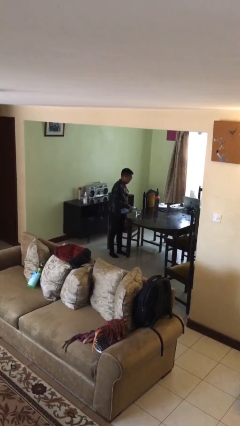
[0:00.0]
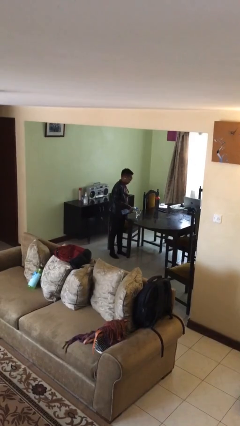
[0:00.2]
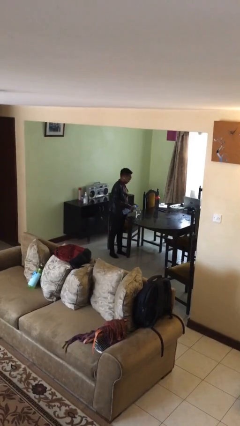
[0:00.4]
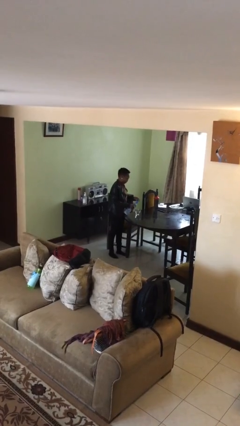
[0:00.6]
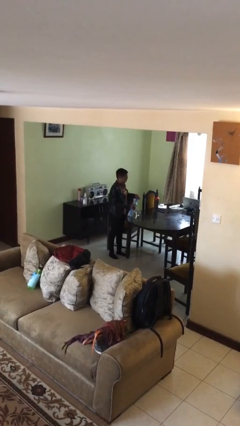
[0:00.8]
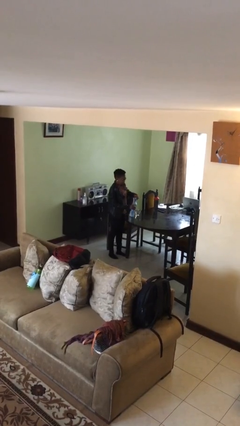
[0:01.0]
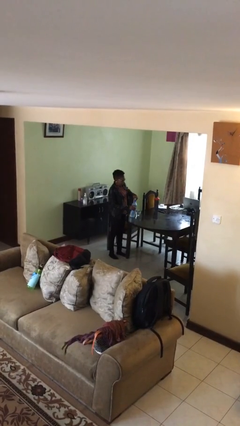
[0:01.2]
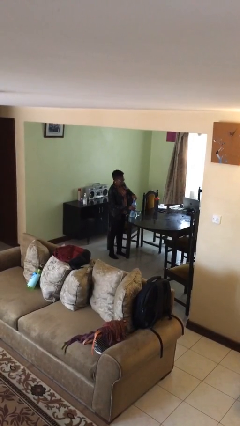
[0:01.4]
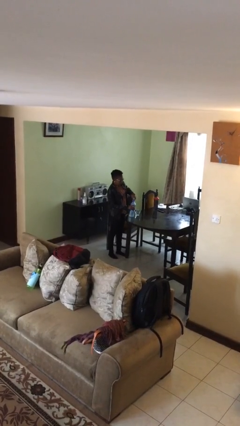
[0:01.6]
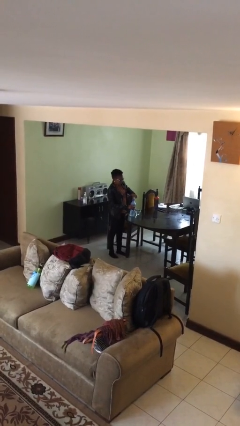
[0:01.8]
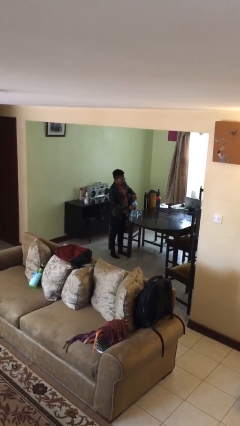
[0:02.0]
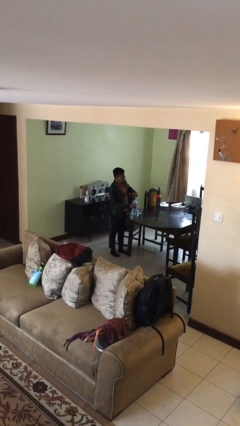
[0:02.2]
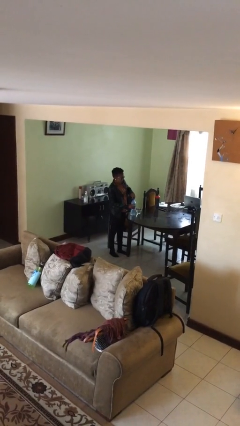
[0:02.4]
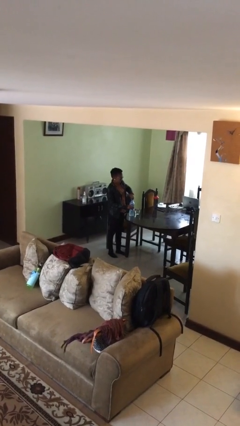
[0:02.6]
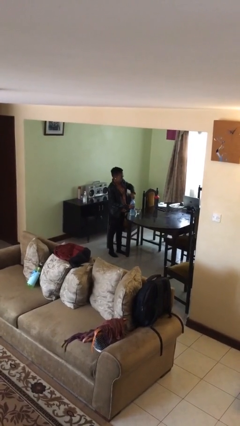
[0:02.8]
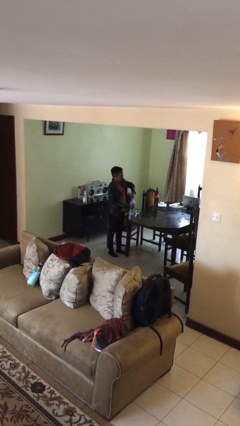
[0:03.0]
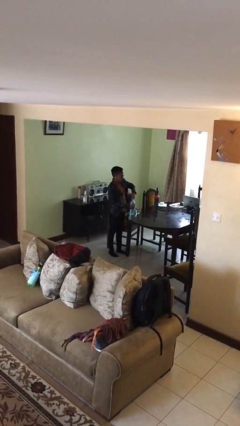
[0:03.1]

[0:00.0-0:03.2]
person screws lid to bottle

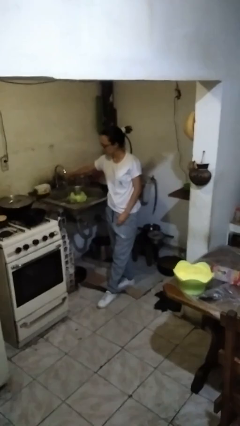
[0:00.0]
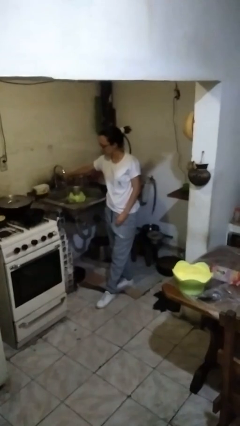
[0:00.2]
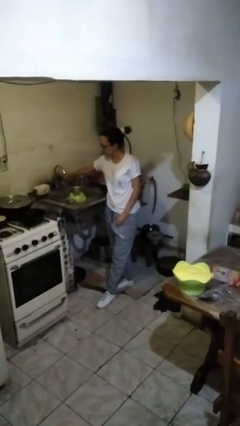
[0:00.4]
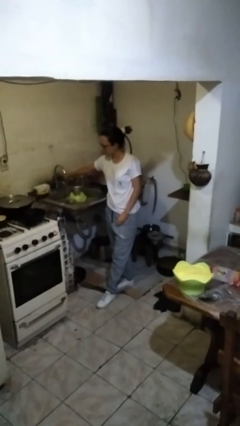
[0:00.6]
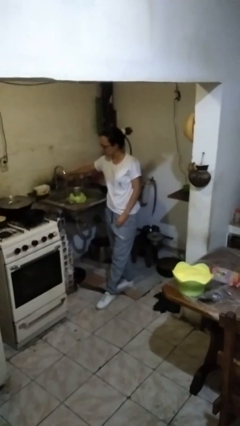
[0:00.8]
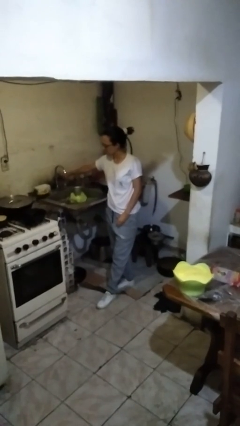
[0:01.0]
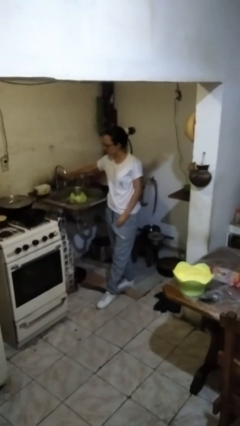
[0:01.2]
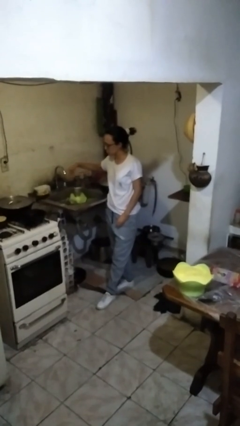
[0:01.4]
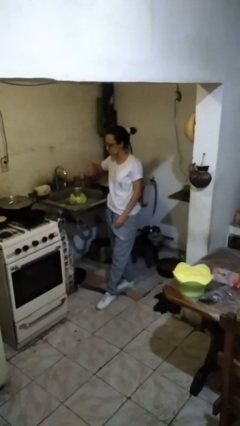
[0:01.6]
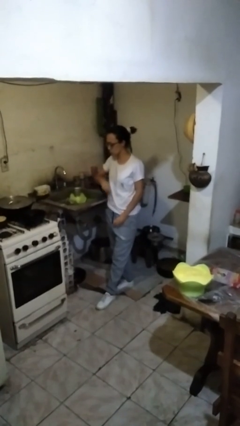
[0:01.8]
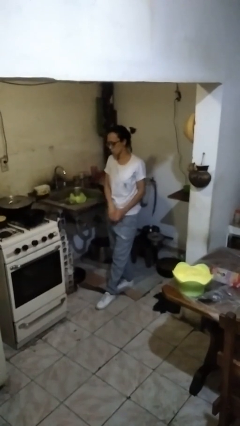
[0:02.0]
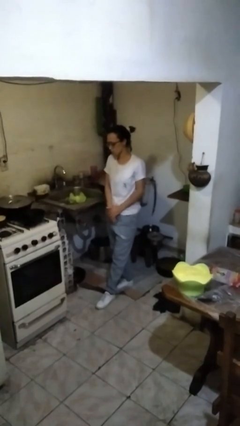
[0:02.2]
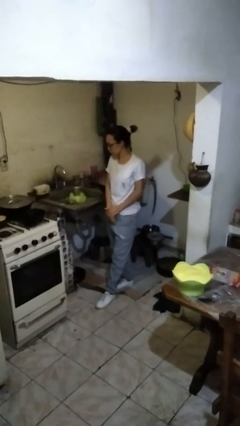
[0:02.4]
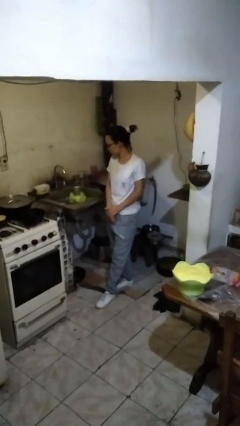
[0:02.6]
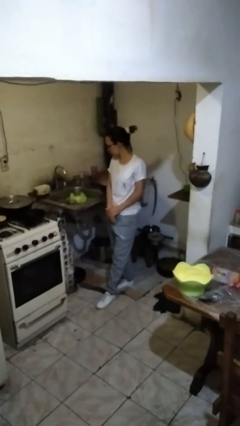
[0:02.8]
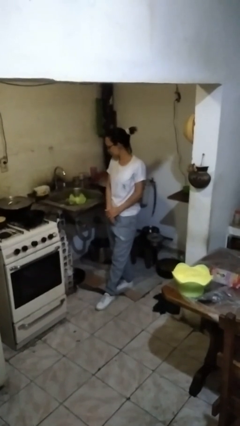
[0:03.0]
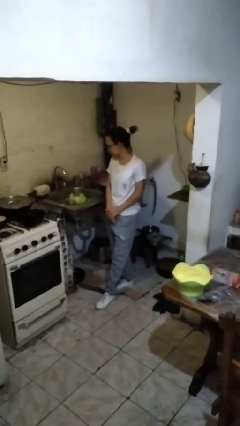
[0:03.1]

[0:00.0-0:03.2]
person turns off faucet

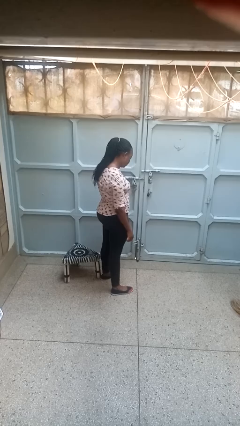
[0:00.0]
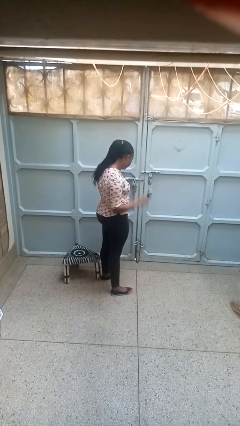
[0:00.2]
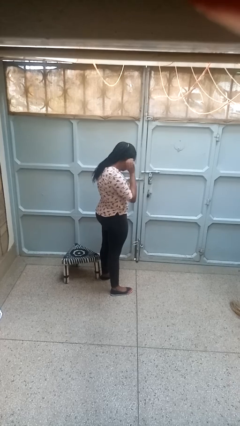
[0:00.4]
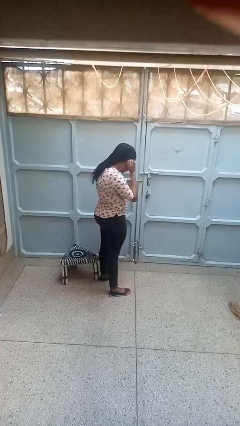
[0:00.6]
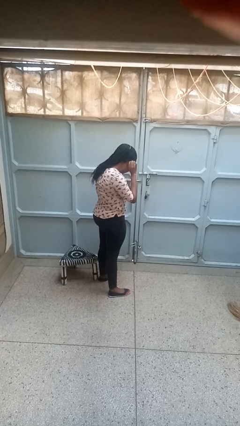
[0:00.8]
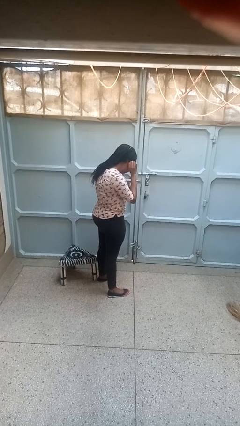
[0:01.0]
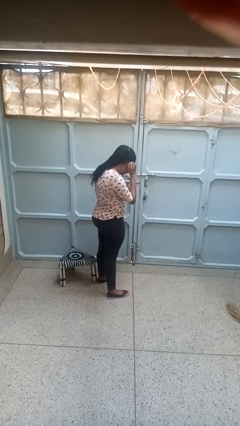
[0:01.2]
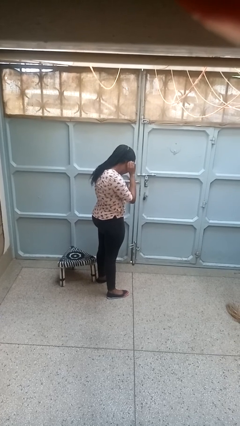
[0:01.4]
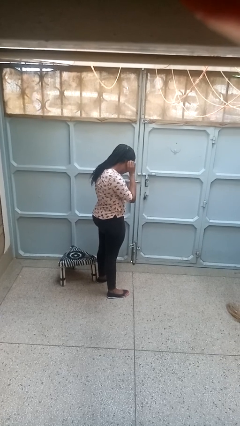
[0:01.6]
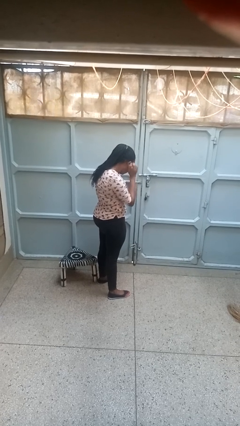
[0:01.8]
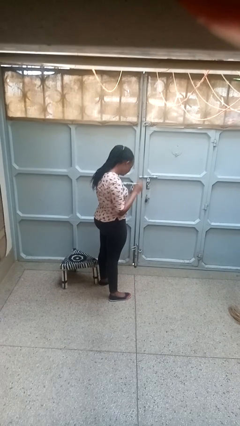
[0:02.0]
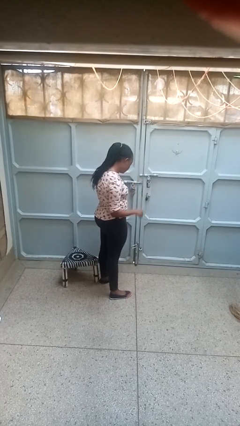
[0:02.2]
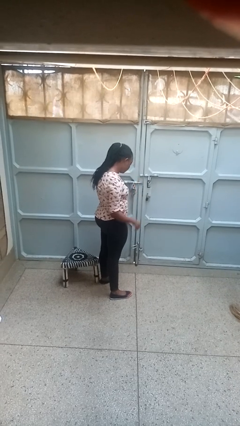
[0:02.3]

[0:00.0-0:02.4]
person gestures listen closely

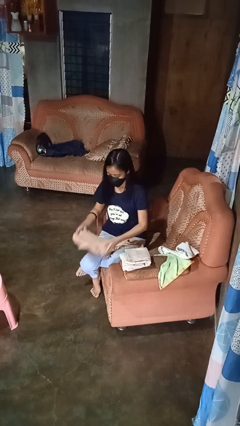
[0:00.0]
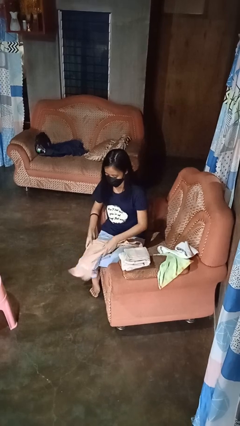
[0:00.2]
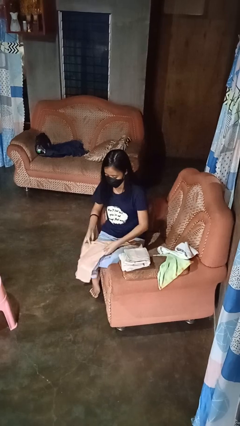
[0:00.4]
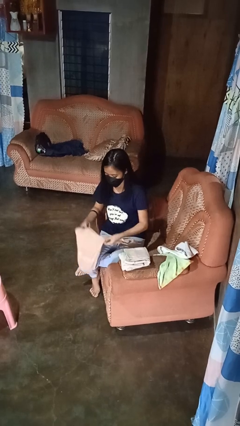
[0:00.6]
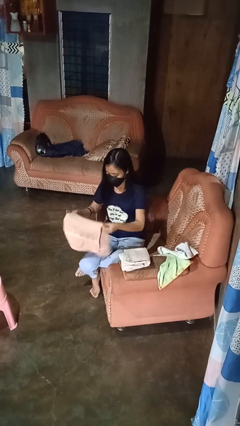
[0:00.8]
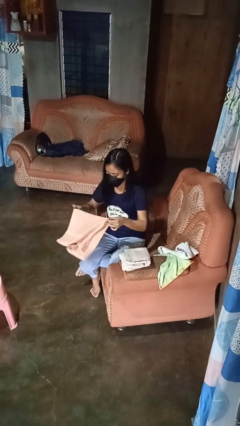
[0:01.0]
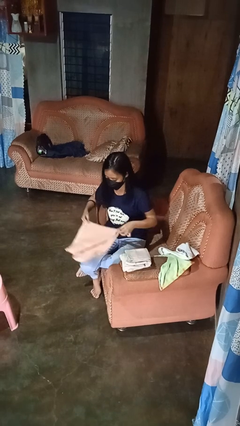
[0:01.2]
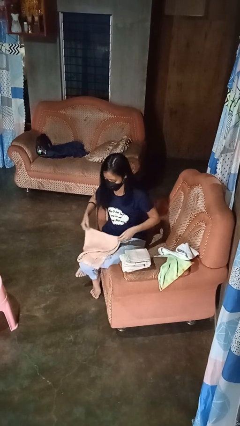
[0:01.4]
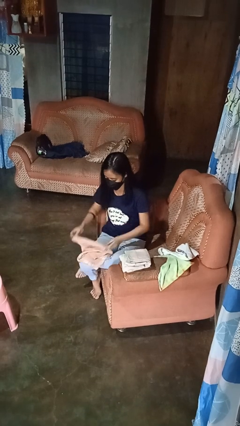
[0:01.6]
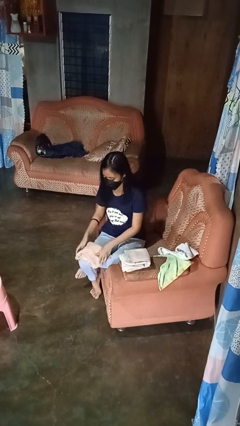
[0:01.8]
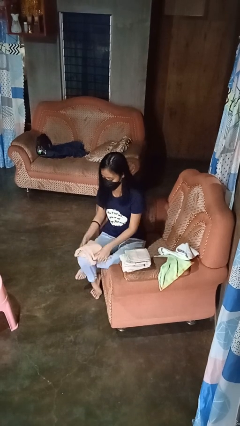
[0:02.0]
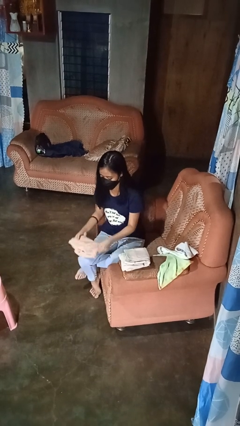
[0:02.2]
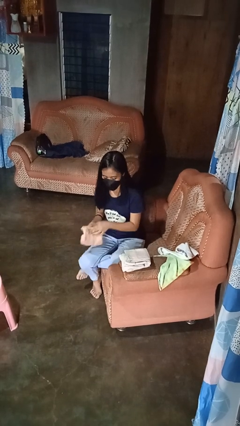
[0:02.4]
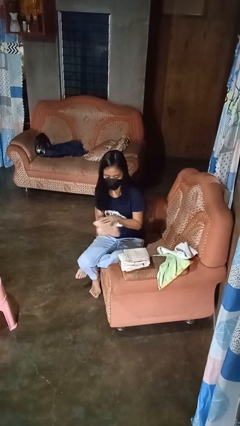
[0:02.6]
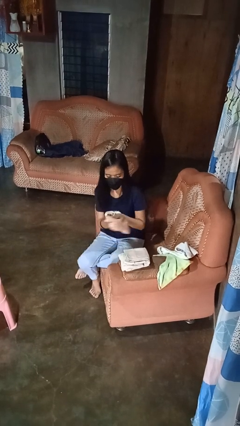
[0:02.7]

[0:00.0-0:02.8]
person folds towel

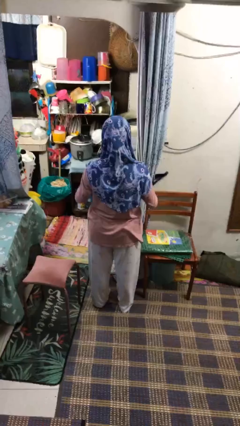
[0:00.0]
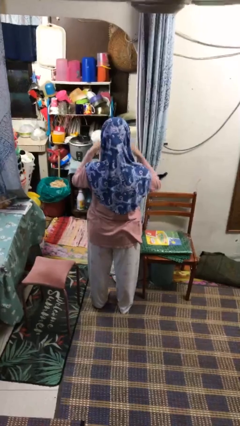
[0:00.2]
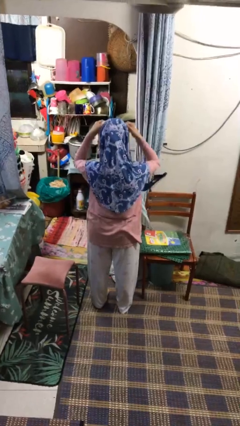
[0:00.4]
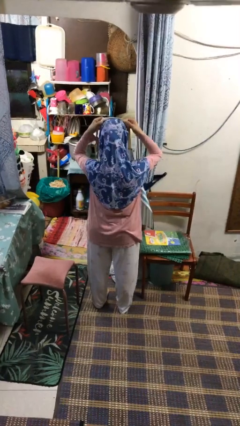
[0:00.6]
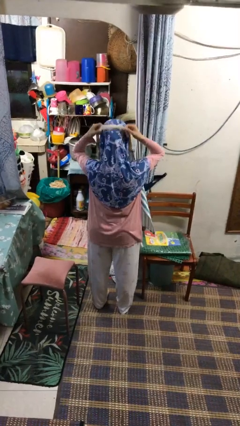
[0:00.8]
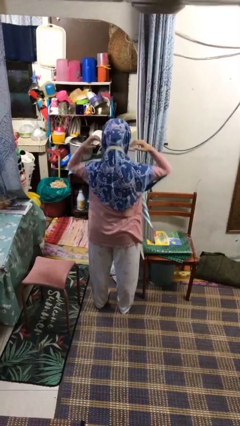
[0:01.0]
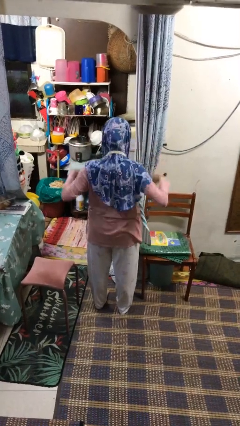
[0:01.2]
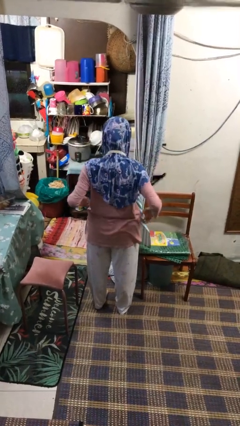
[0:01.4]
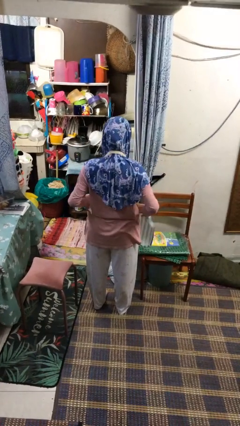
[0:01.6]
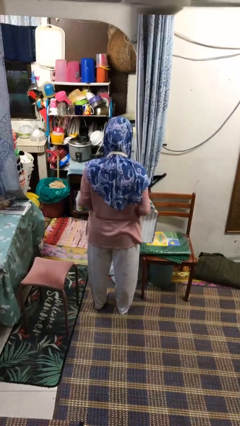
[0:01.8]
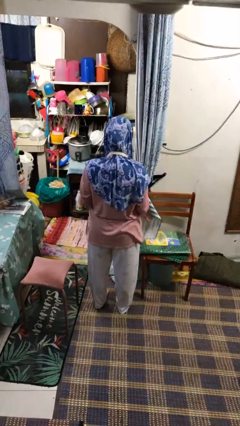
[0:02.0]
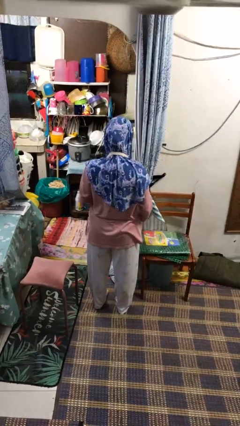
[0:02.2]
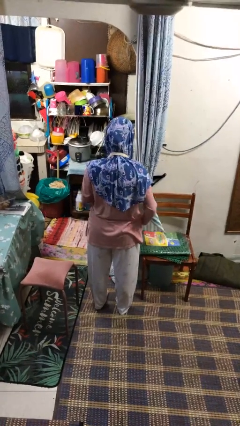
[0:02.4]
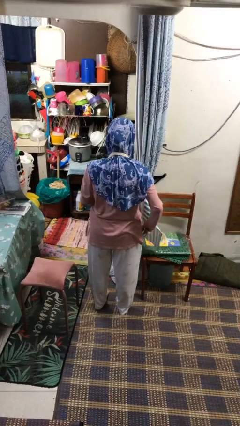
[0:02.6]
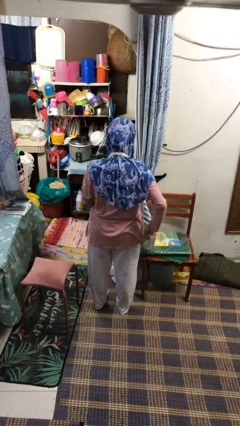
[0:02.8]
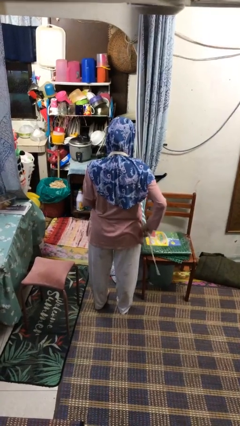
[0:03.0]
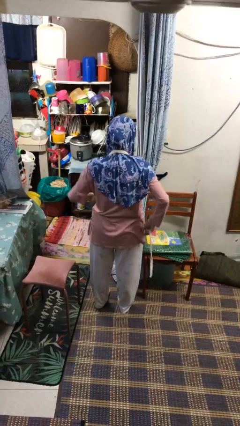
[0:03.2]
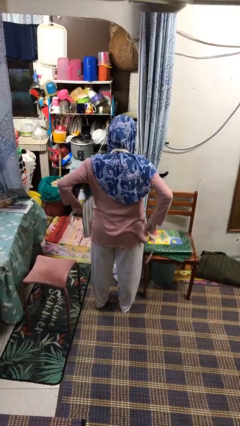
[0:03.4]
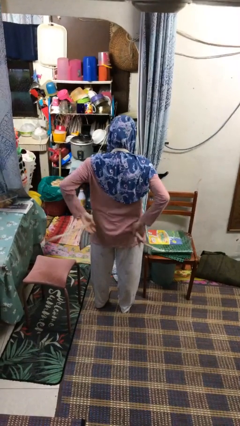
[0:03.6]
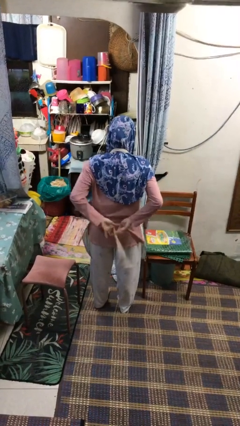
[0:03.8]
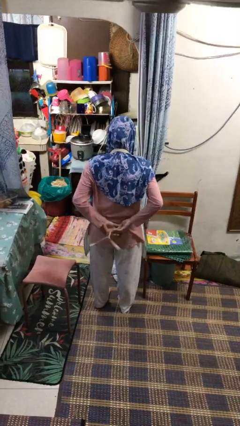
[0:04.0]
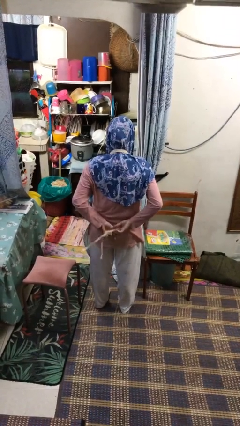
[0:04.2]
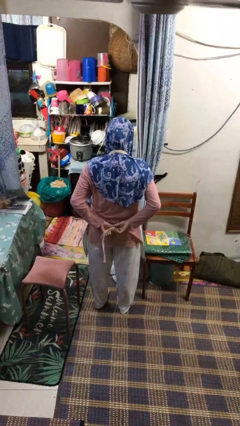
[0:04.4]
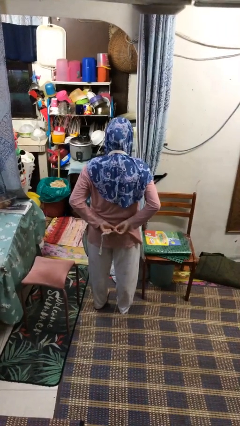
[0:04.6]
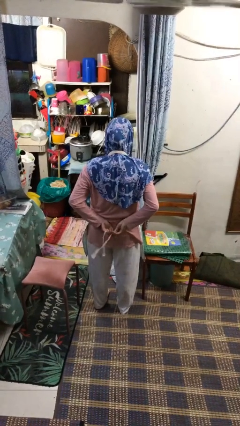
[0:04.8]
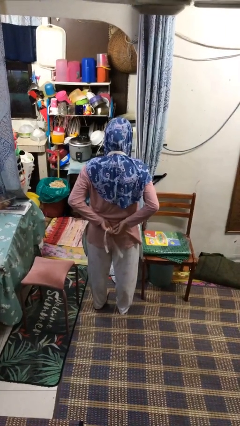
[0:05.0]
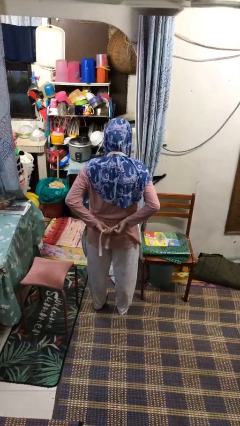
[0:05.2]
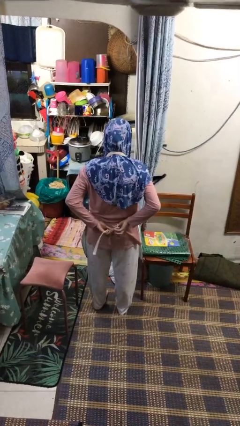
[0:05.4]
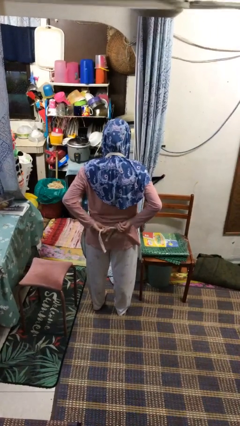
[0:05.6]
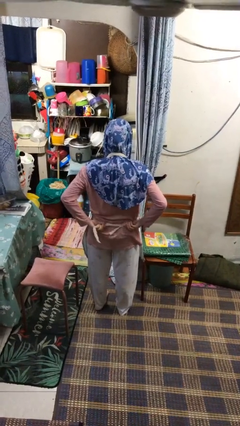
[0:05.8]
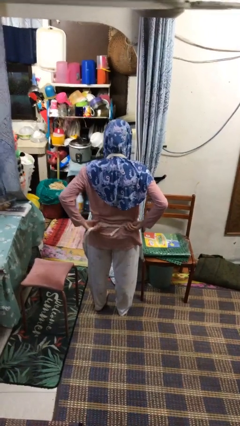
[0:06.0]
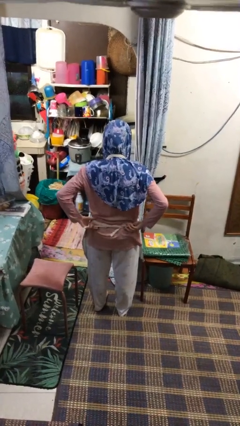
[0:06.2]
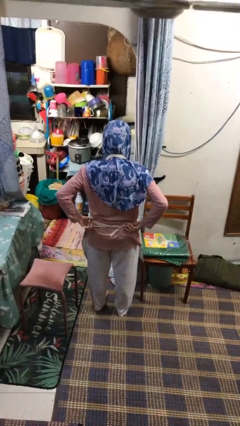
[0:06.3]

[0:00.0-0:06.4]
person puts on apron

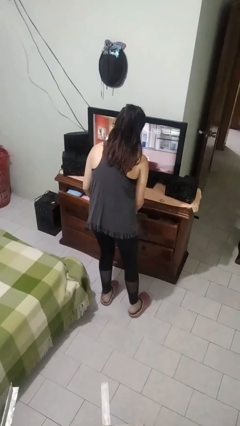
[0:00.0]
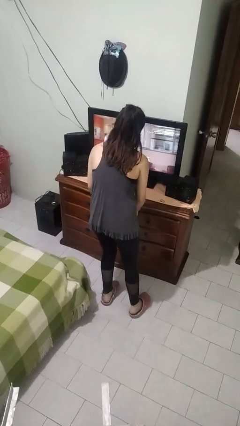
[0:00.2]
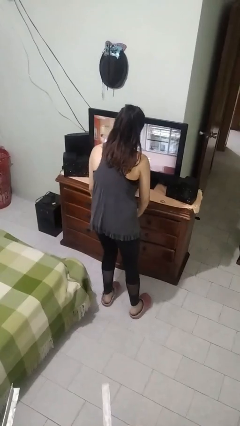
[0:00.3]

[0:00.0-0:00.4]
person closes dresser drawer
